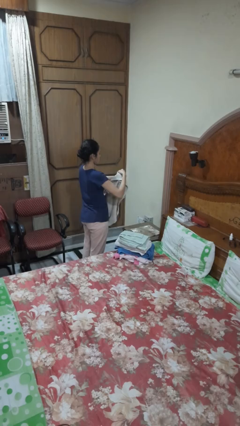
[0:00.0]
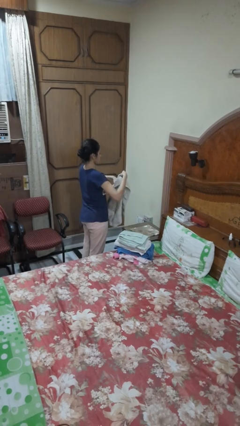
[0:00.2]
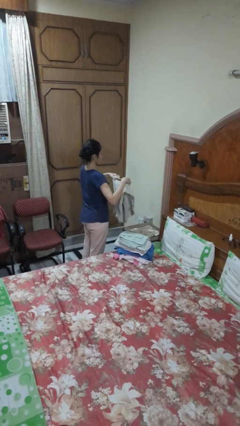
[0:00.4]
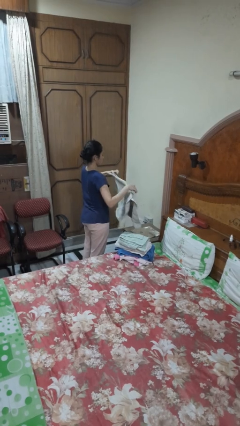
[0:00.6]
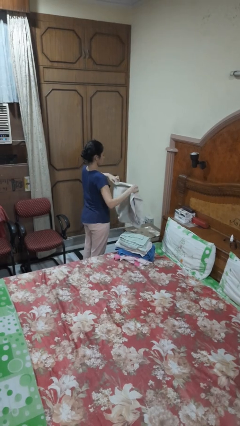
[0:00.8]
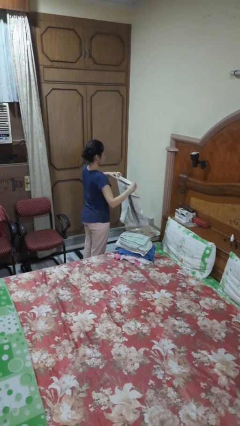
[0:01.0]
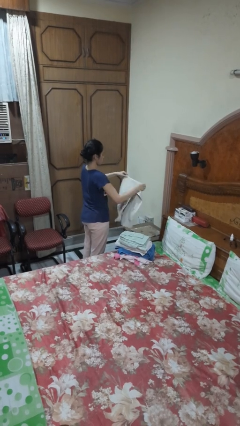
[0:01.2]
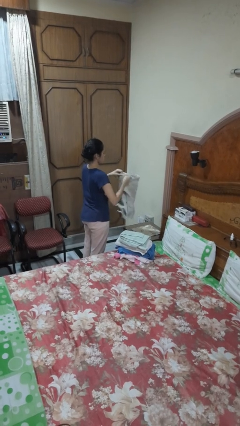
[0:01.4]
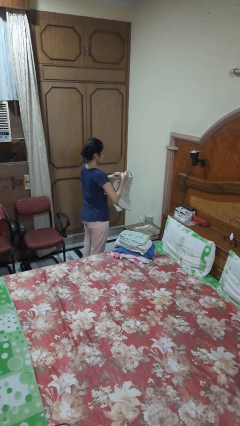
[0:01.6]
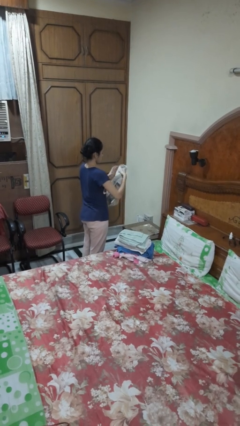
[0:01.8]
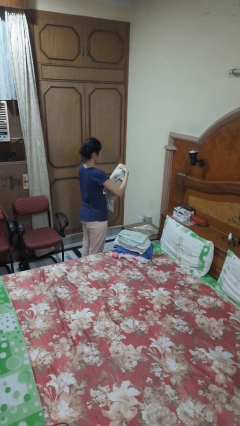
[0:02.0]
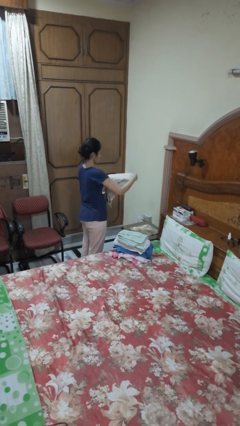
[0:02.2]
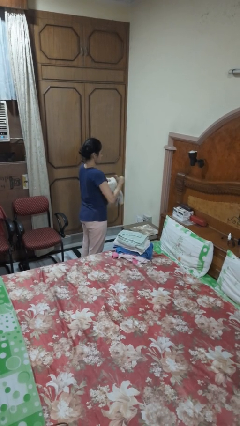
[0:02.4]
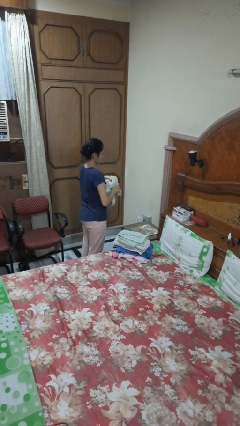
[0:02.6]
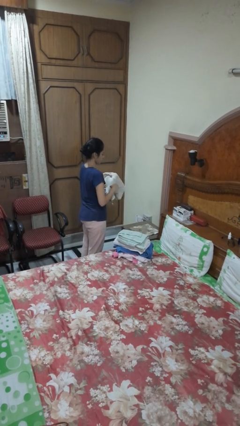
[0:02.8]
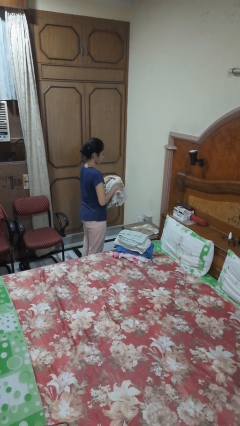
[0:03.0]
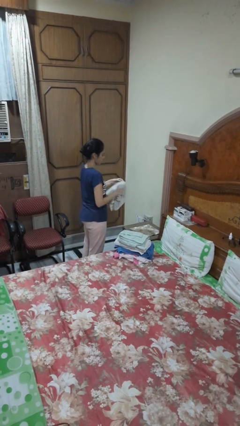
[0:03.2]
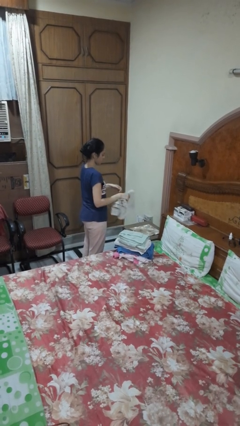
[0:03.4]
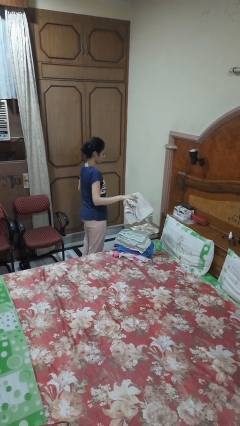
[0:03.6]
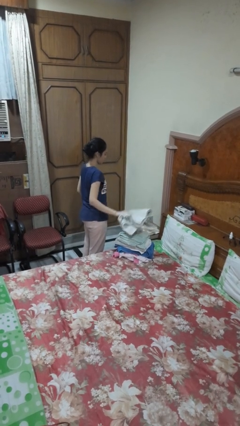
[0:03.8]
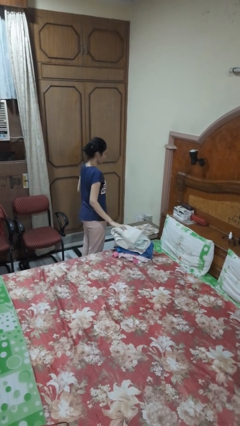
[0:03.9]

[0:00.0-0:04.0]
person folds towel

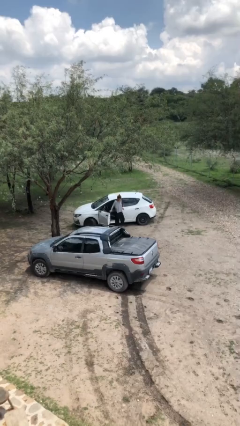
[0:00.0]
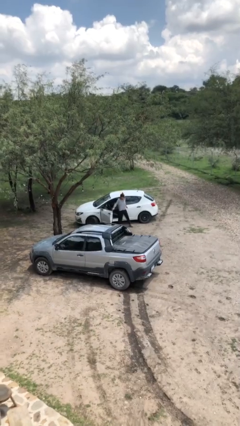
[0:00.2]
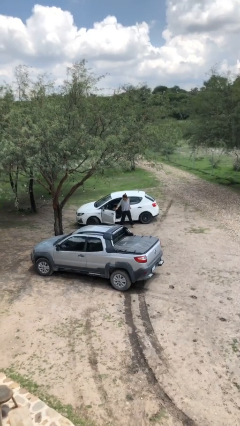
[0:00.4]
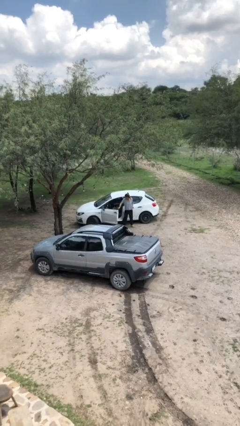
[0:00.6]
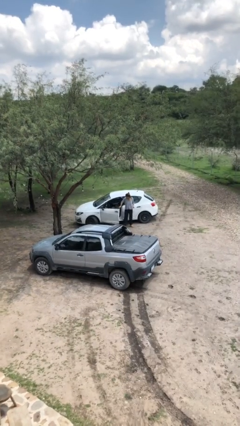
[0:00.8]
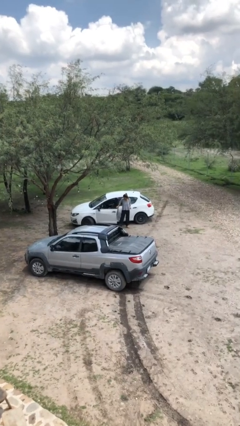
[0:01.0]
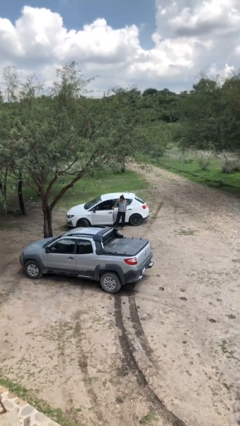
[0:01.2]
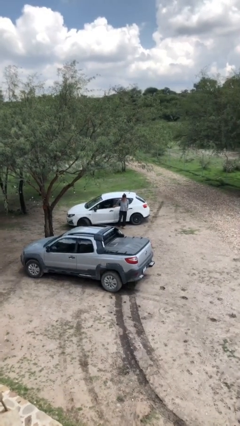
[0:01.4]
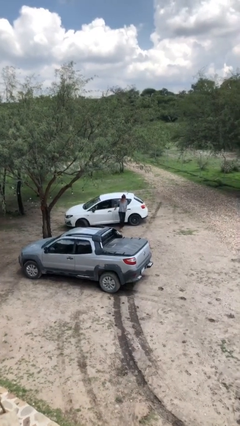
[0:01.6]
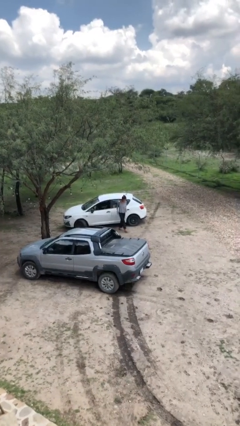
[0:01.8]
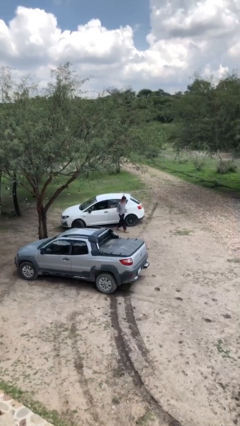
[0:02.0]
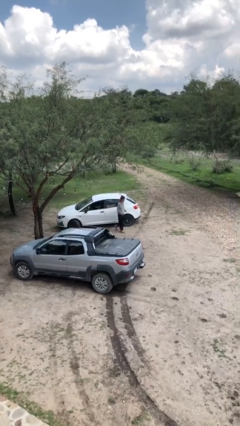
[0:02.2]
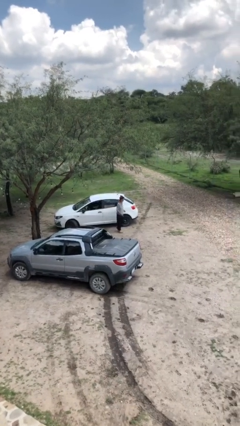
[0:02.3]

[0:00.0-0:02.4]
person closes car door

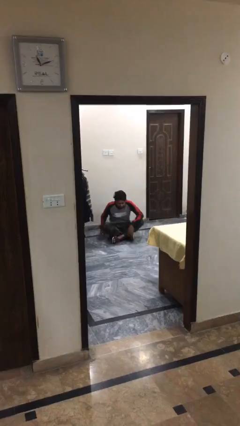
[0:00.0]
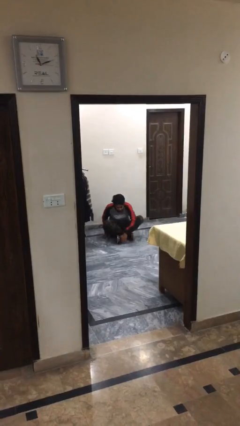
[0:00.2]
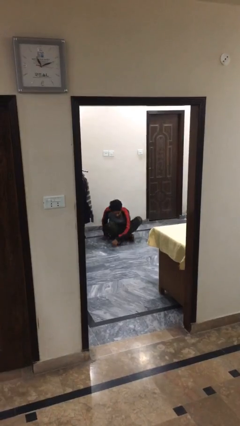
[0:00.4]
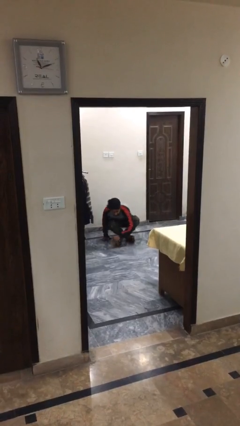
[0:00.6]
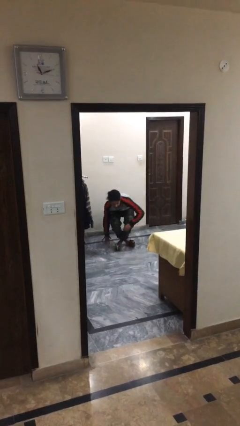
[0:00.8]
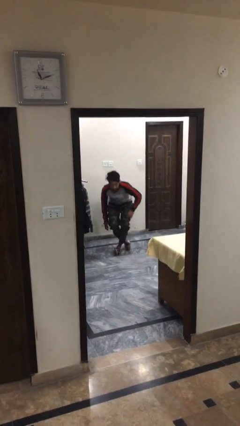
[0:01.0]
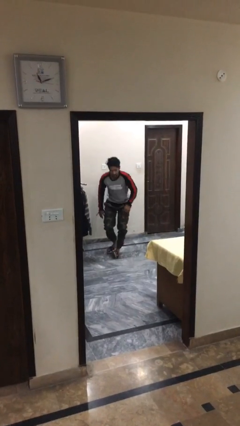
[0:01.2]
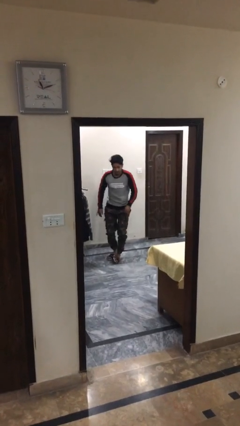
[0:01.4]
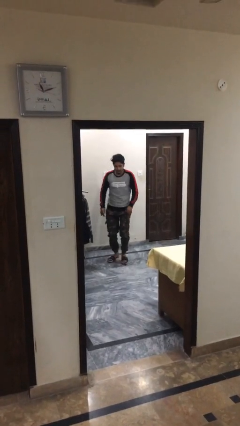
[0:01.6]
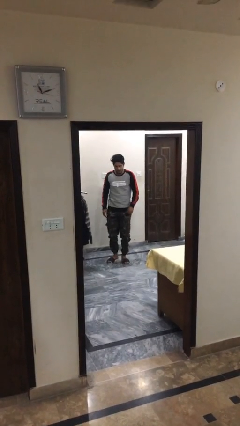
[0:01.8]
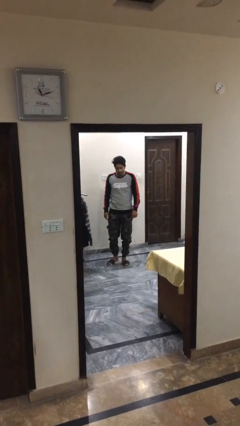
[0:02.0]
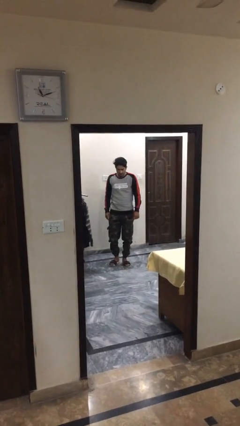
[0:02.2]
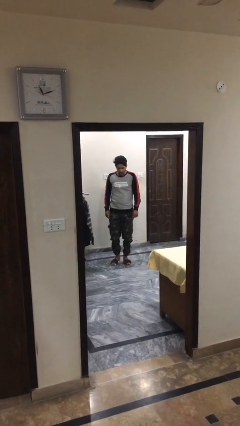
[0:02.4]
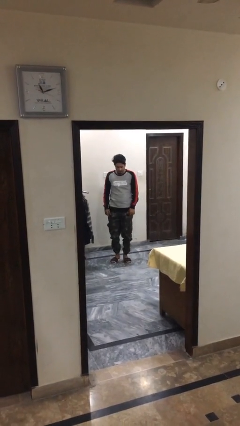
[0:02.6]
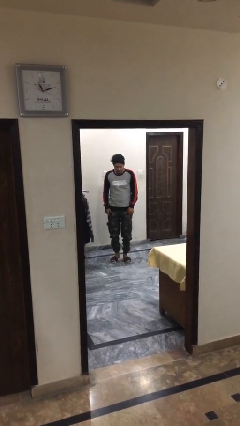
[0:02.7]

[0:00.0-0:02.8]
person stands up

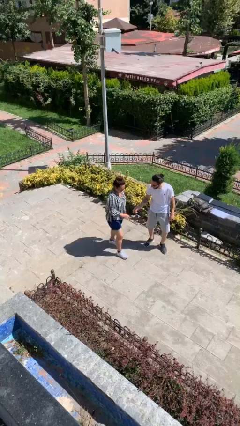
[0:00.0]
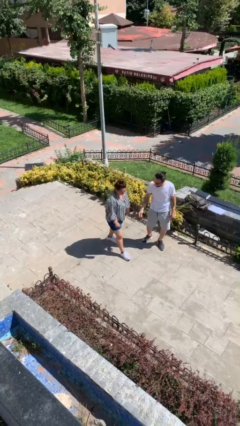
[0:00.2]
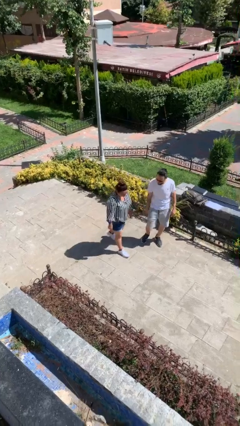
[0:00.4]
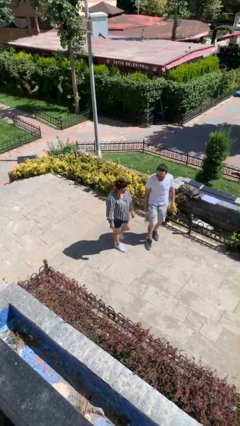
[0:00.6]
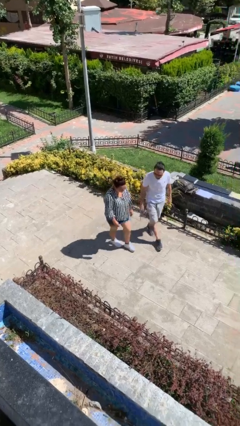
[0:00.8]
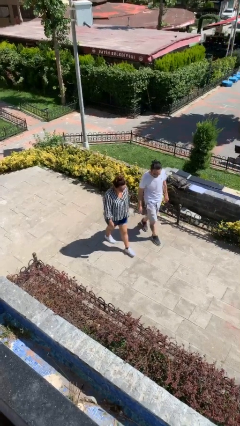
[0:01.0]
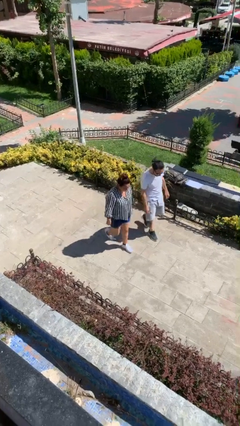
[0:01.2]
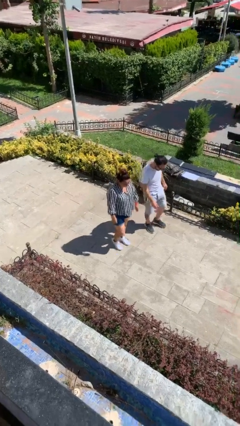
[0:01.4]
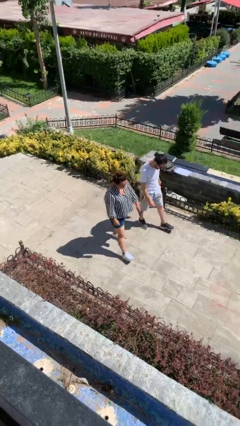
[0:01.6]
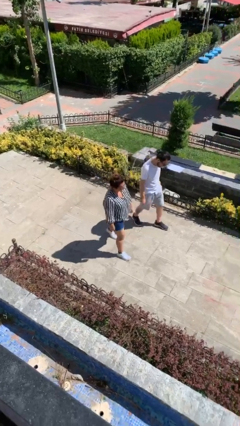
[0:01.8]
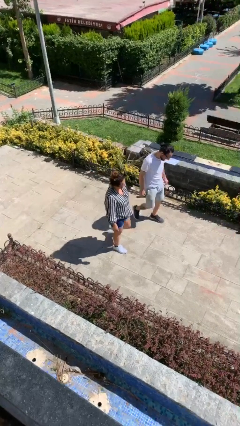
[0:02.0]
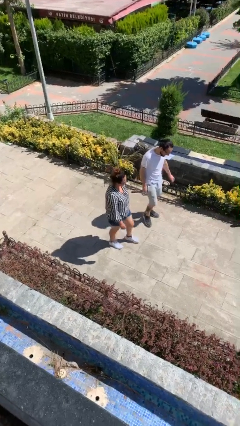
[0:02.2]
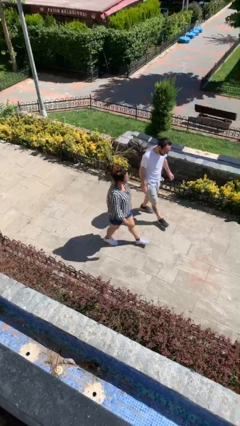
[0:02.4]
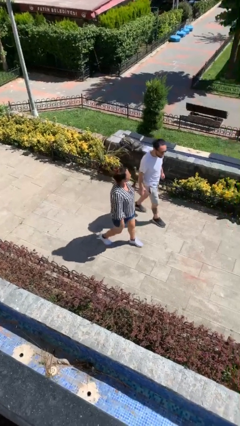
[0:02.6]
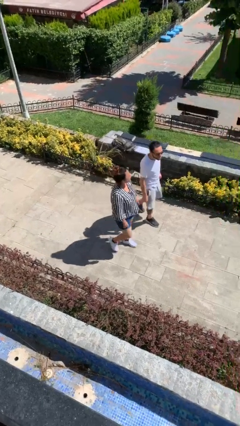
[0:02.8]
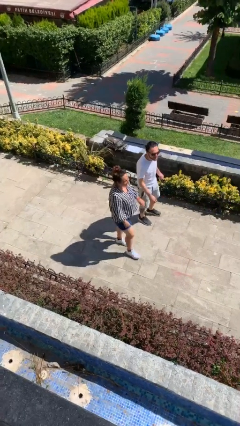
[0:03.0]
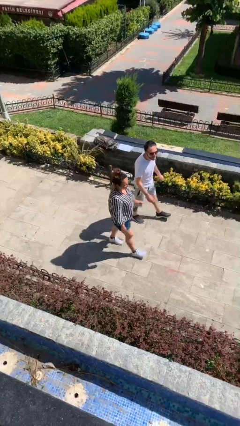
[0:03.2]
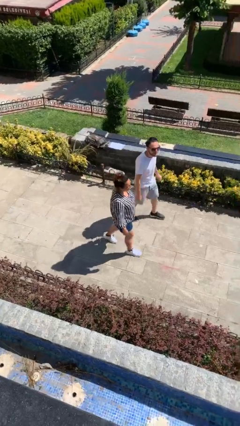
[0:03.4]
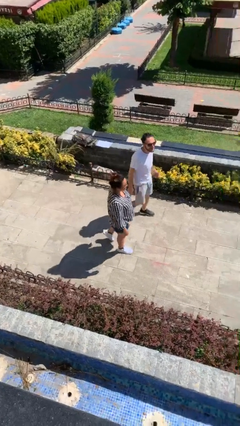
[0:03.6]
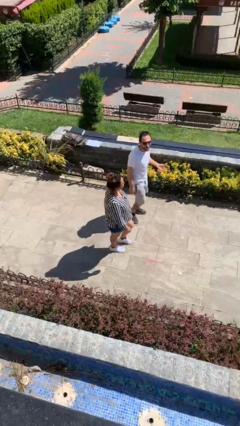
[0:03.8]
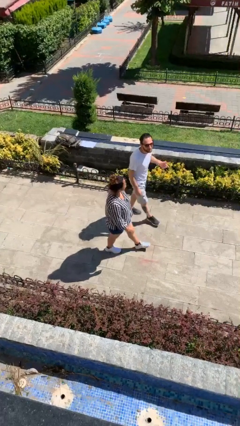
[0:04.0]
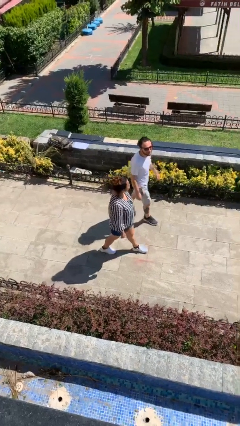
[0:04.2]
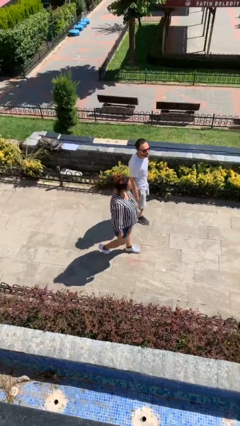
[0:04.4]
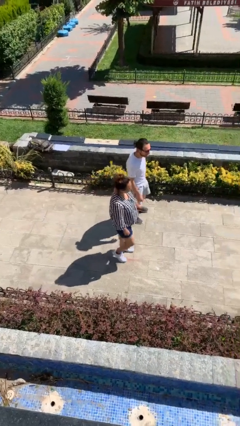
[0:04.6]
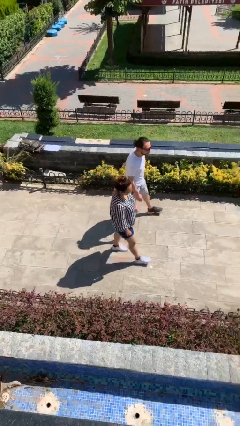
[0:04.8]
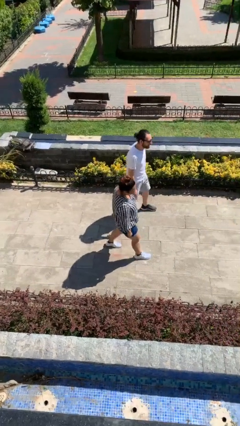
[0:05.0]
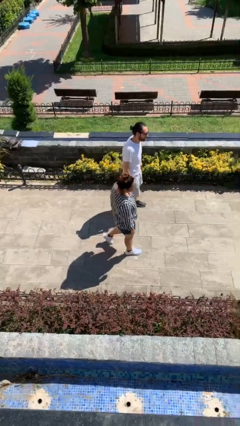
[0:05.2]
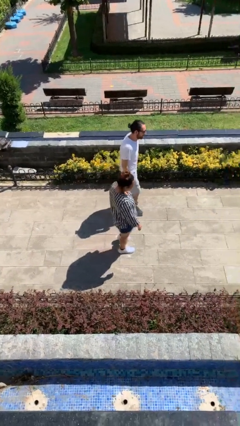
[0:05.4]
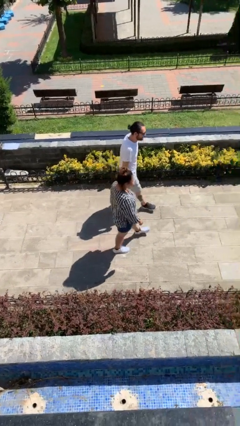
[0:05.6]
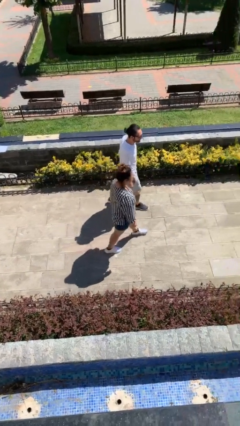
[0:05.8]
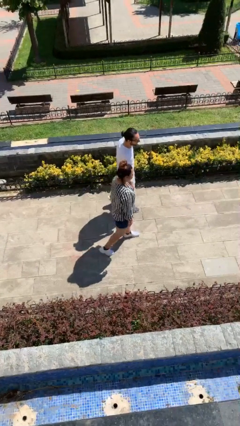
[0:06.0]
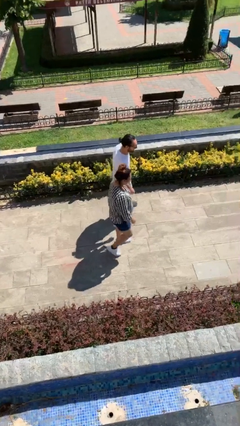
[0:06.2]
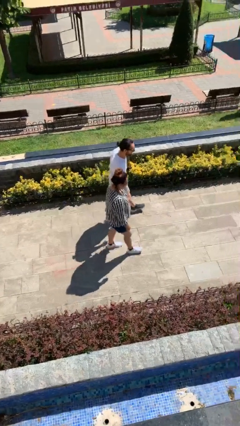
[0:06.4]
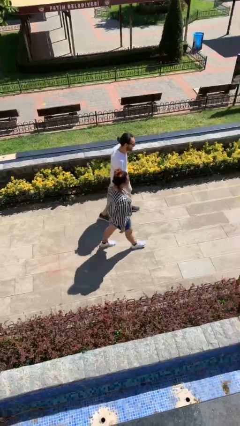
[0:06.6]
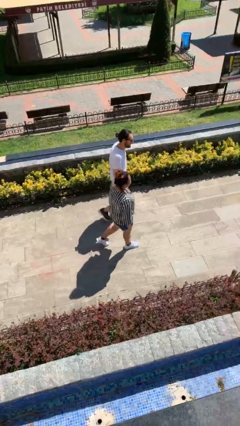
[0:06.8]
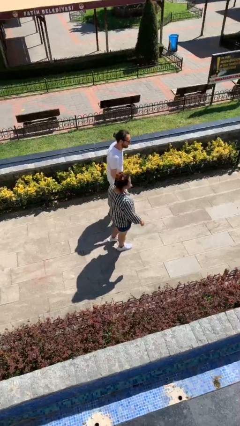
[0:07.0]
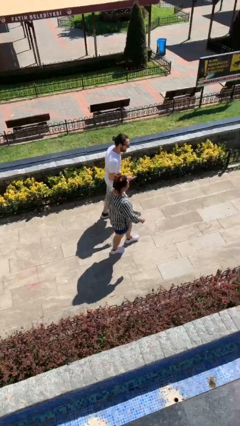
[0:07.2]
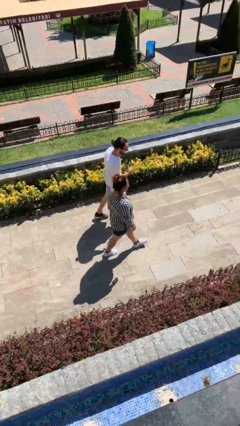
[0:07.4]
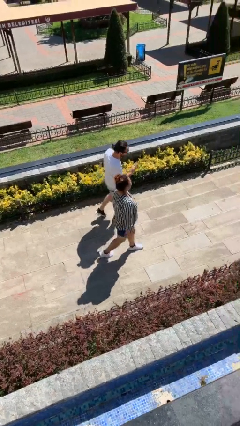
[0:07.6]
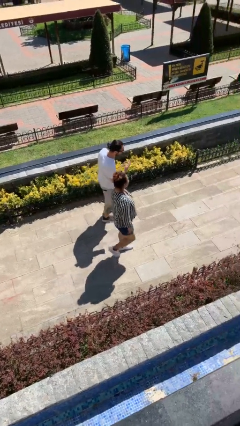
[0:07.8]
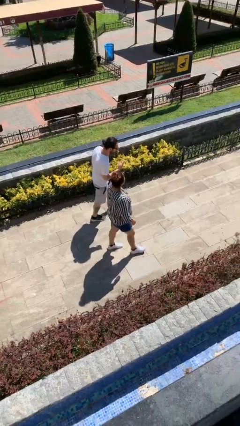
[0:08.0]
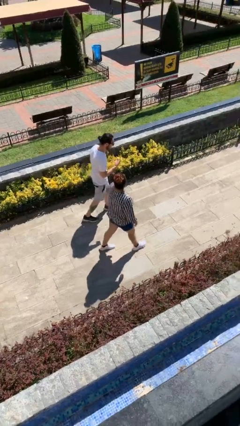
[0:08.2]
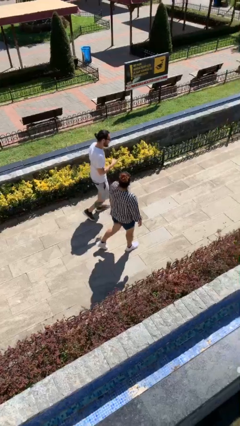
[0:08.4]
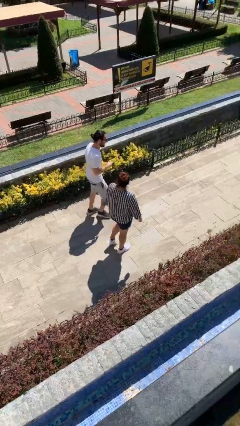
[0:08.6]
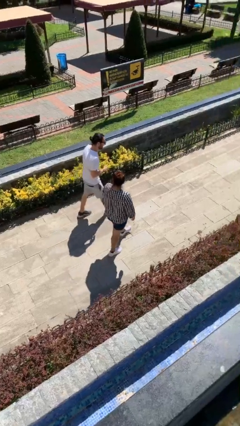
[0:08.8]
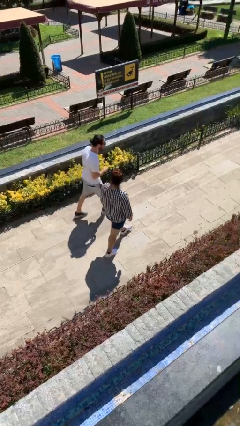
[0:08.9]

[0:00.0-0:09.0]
person talks to person
